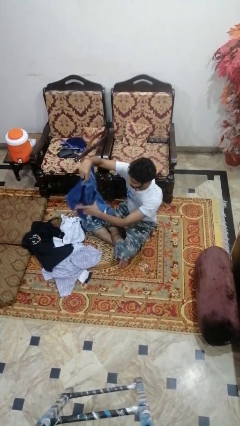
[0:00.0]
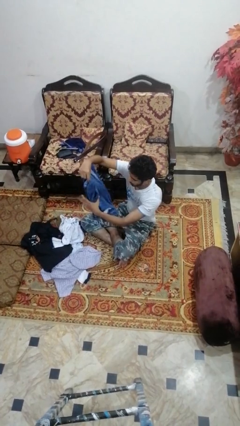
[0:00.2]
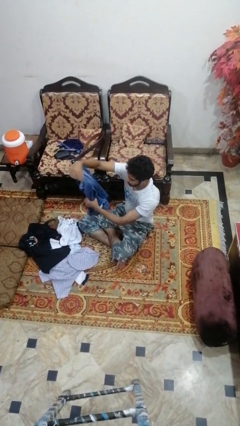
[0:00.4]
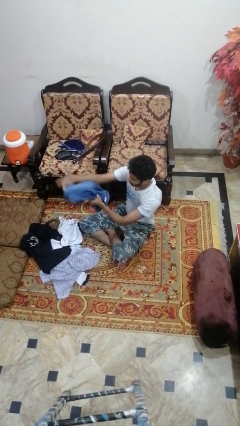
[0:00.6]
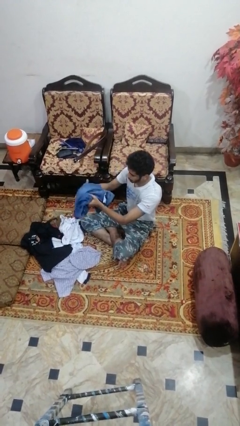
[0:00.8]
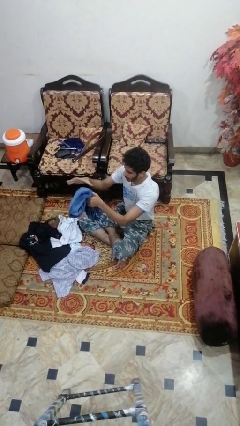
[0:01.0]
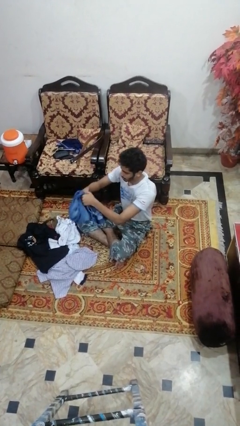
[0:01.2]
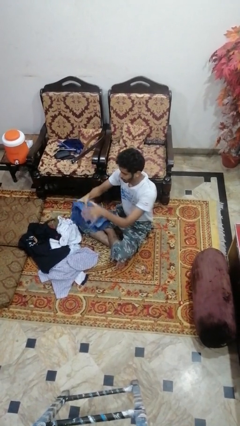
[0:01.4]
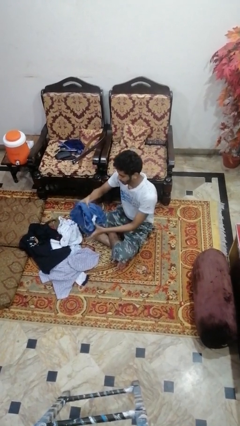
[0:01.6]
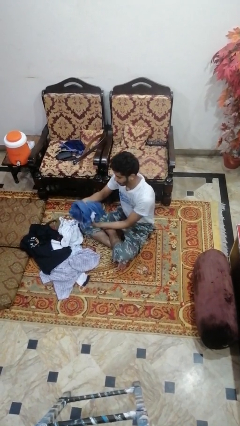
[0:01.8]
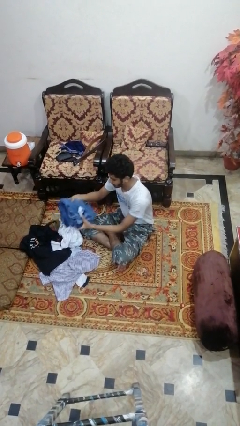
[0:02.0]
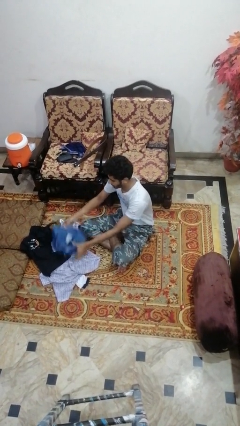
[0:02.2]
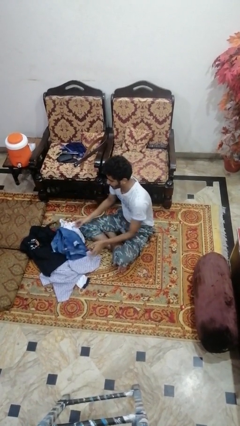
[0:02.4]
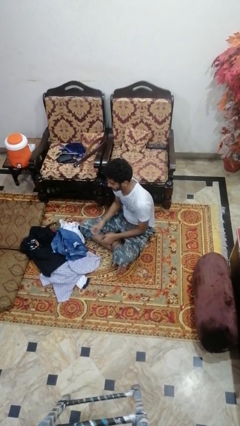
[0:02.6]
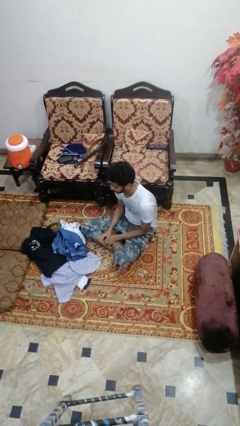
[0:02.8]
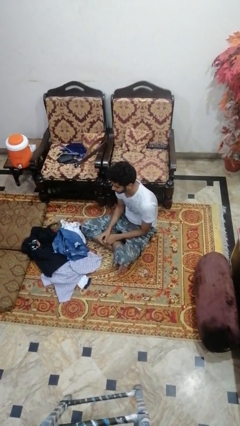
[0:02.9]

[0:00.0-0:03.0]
person folds pants

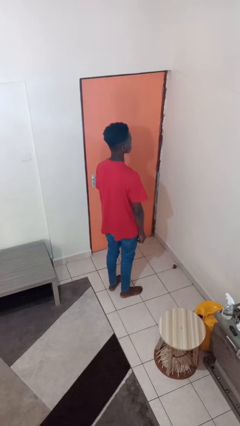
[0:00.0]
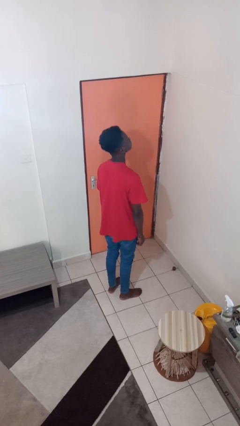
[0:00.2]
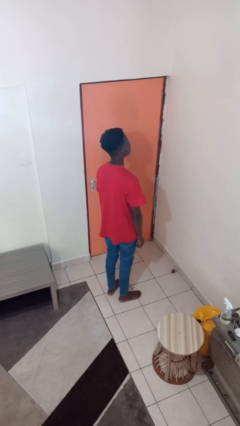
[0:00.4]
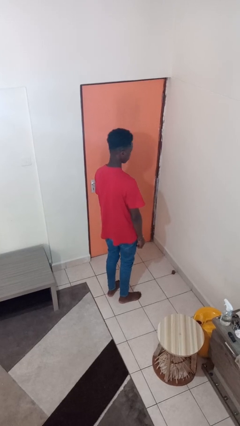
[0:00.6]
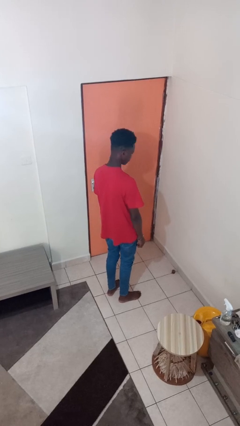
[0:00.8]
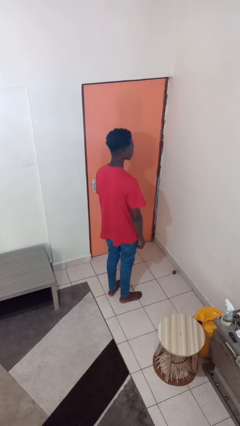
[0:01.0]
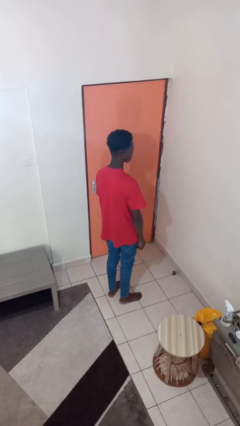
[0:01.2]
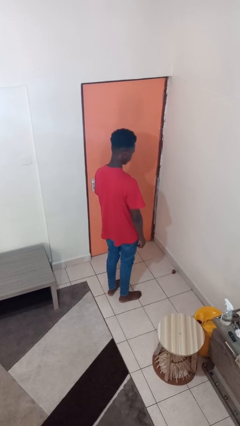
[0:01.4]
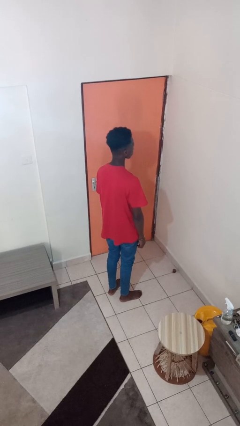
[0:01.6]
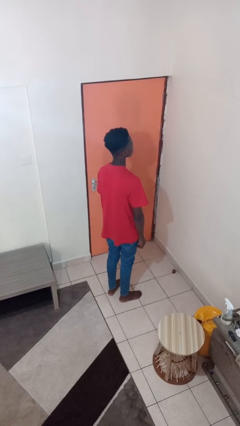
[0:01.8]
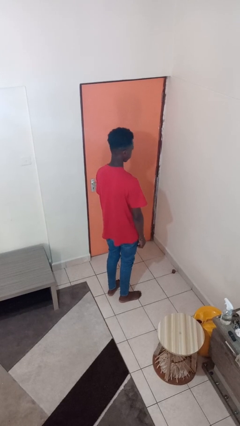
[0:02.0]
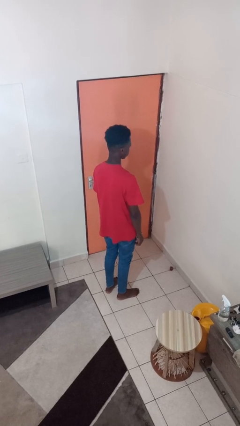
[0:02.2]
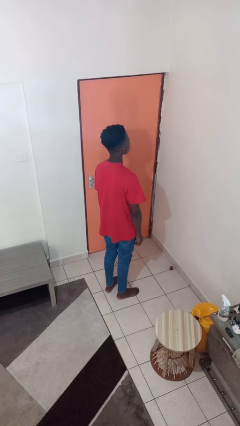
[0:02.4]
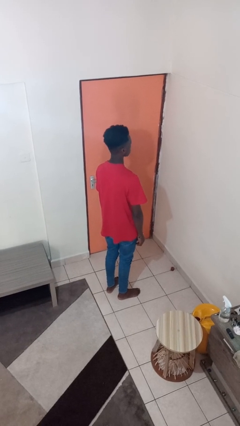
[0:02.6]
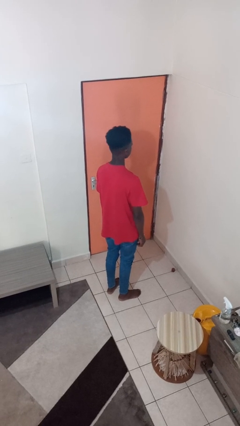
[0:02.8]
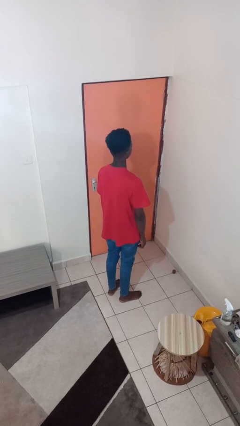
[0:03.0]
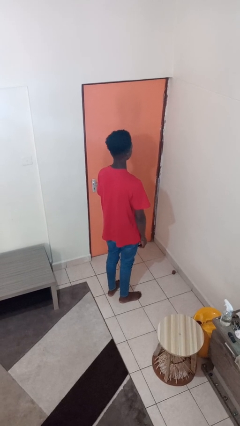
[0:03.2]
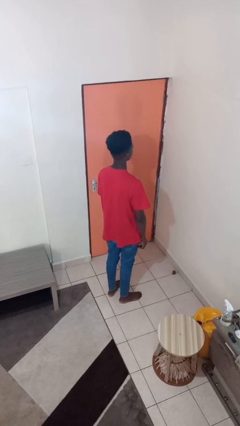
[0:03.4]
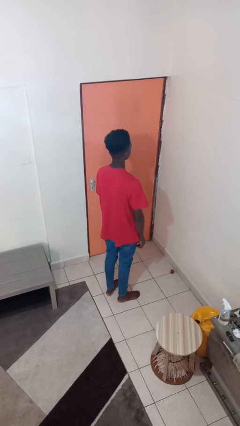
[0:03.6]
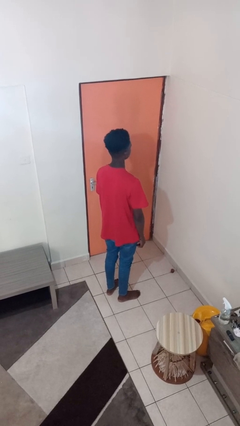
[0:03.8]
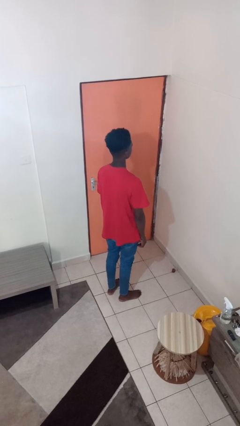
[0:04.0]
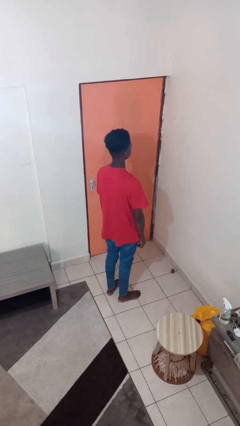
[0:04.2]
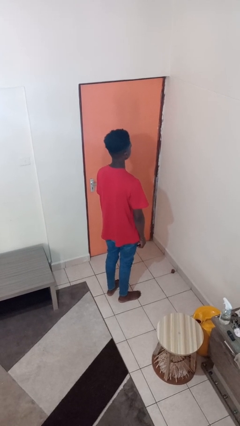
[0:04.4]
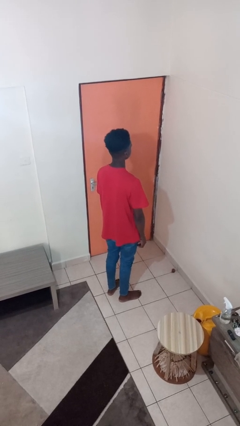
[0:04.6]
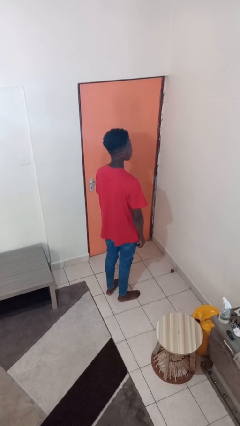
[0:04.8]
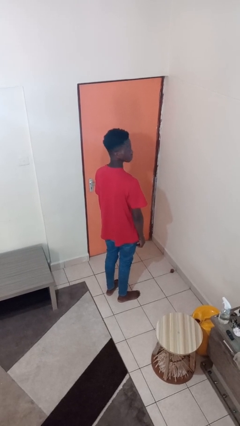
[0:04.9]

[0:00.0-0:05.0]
person nods head

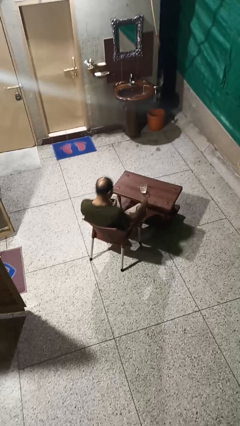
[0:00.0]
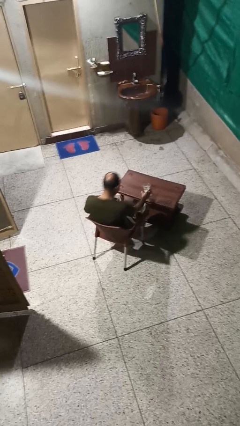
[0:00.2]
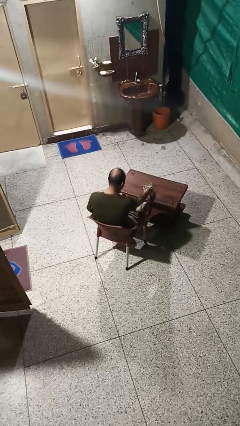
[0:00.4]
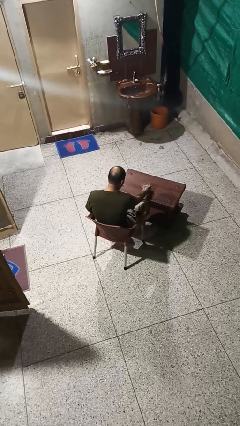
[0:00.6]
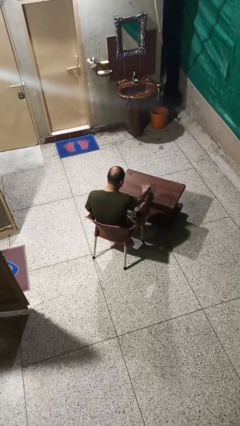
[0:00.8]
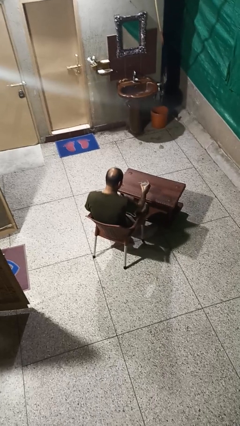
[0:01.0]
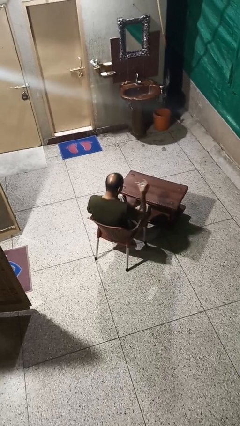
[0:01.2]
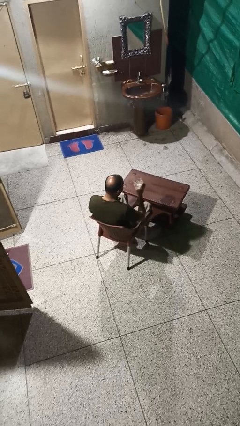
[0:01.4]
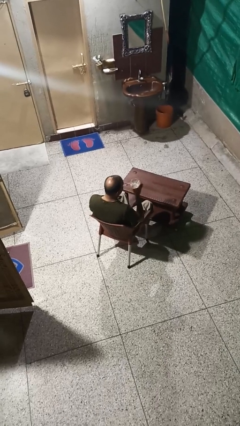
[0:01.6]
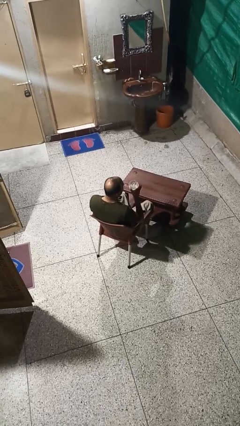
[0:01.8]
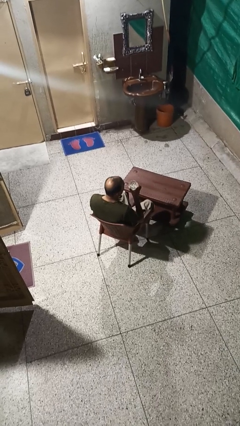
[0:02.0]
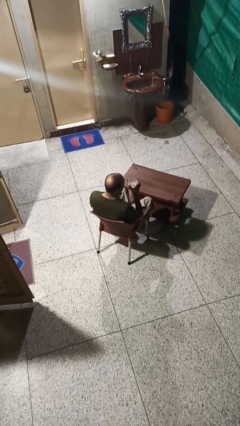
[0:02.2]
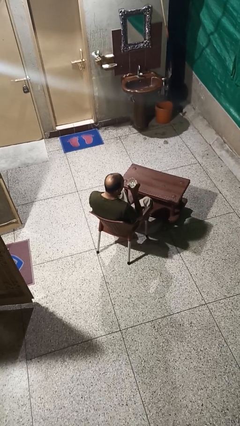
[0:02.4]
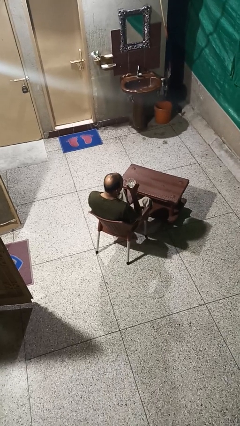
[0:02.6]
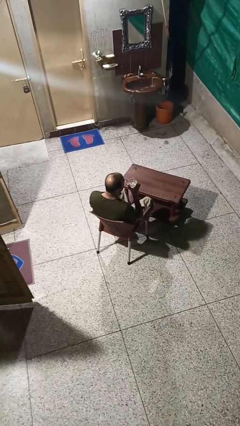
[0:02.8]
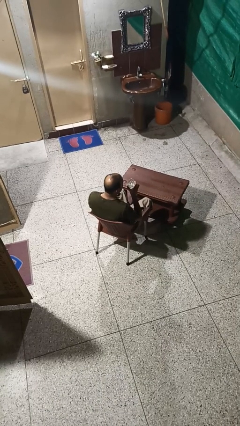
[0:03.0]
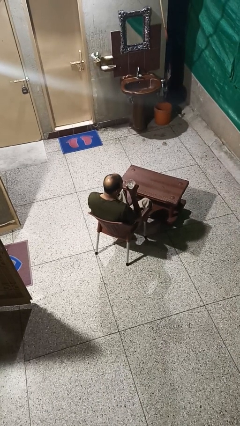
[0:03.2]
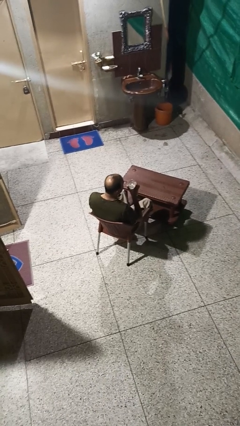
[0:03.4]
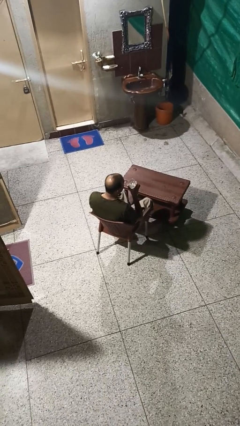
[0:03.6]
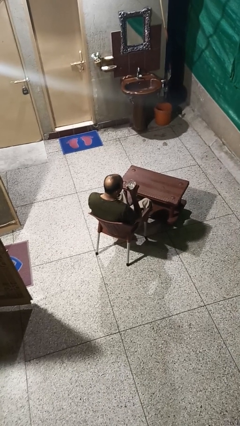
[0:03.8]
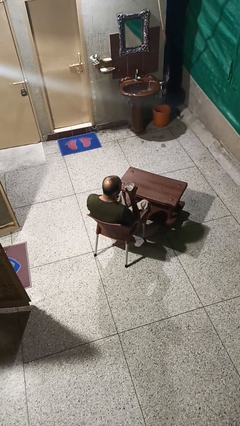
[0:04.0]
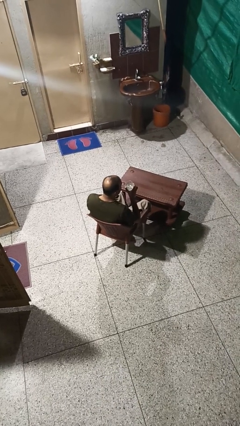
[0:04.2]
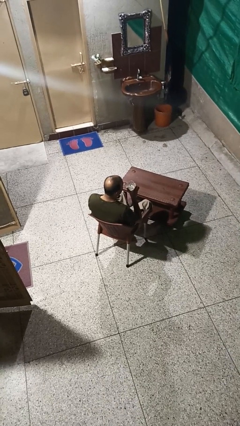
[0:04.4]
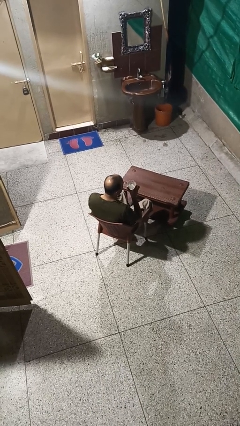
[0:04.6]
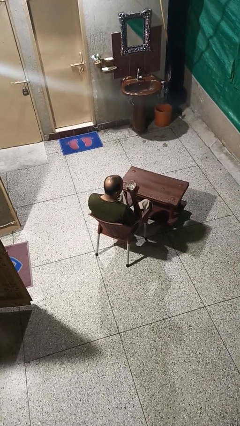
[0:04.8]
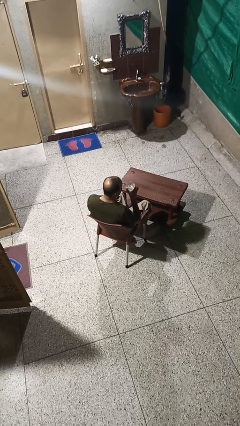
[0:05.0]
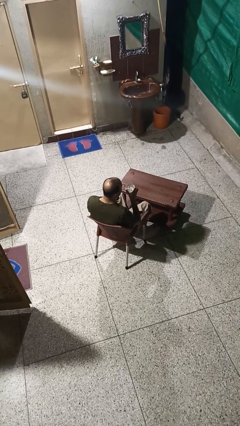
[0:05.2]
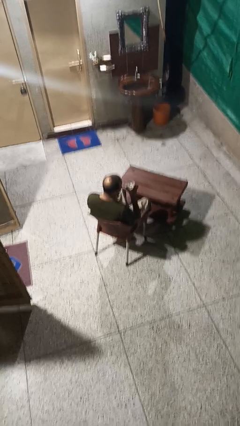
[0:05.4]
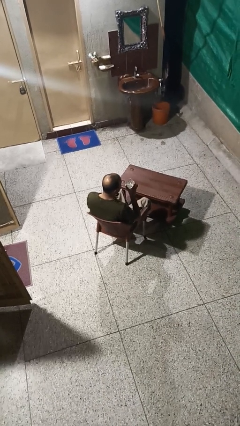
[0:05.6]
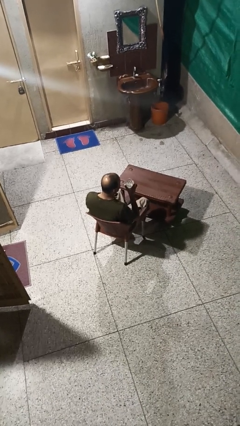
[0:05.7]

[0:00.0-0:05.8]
person drinks from straw

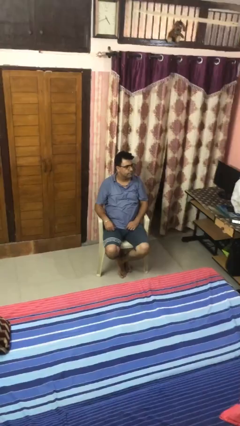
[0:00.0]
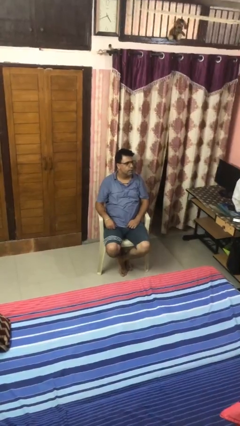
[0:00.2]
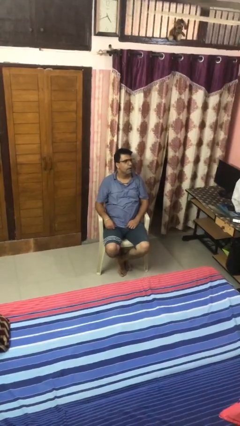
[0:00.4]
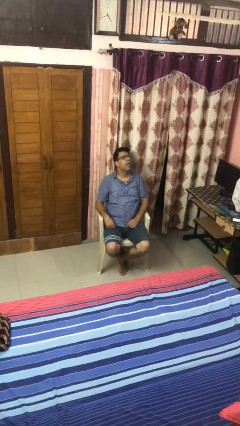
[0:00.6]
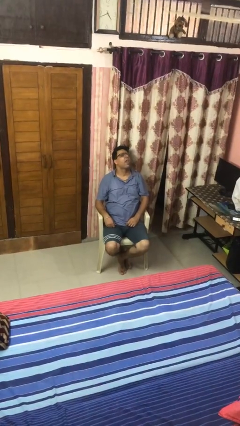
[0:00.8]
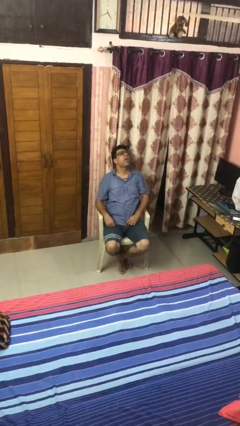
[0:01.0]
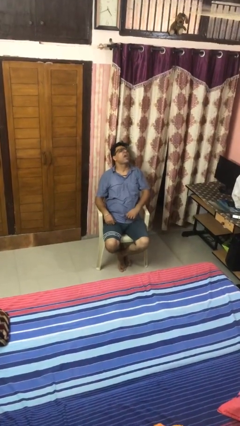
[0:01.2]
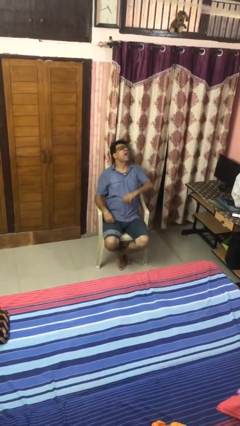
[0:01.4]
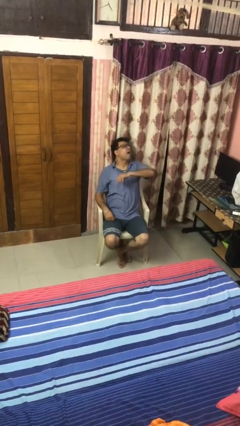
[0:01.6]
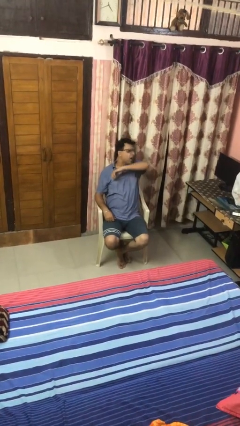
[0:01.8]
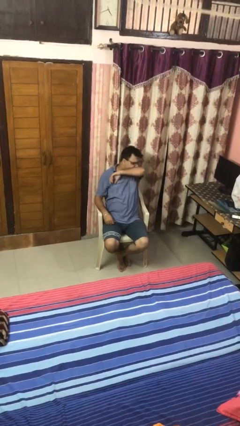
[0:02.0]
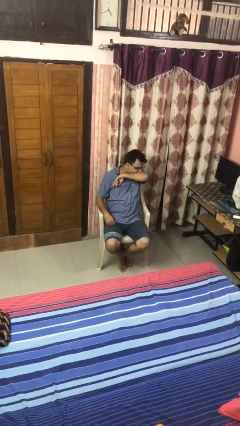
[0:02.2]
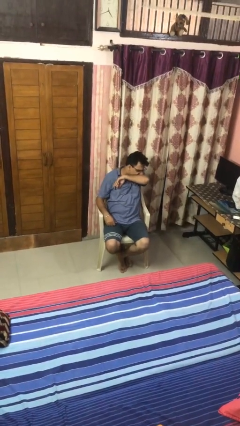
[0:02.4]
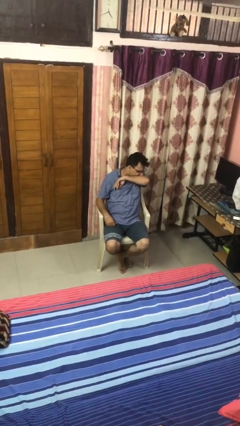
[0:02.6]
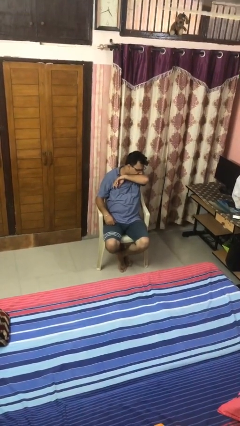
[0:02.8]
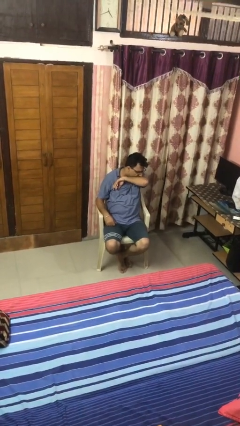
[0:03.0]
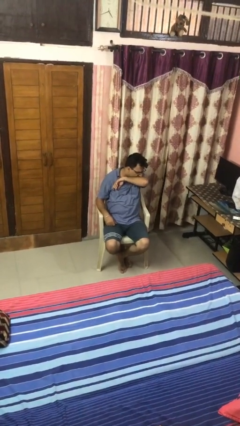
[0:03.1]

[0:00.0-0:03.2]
person sneezes into arm

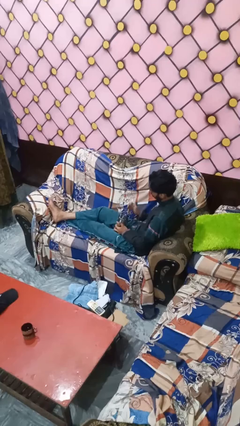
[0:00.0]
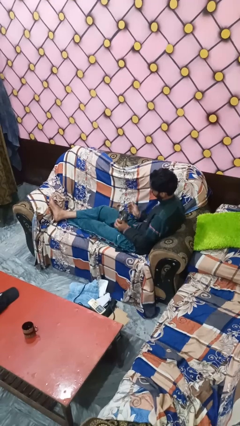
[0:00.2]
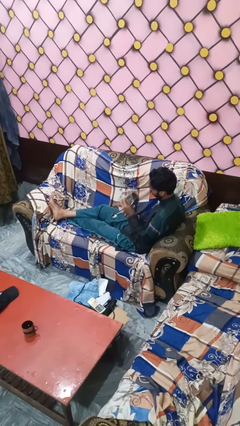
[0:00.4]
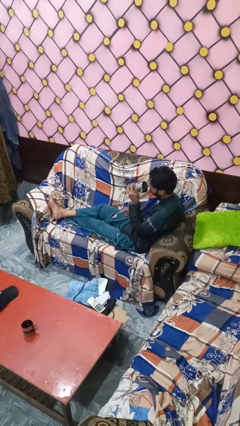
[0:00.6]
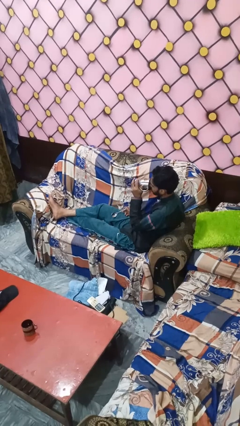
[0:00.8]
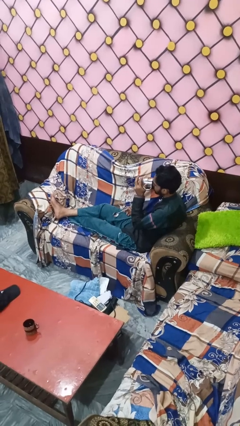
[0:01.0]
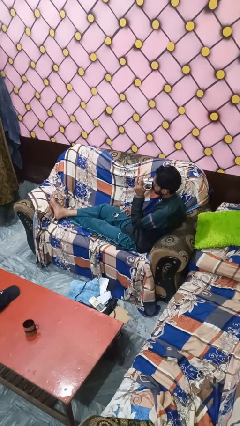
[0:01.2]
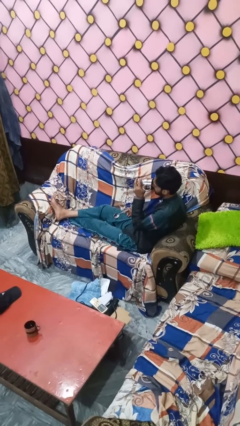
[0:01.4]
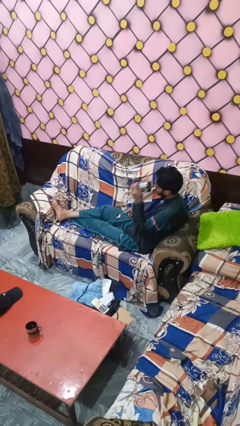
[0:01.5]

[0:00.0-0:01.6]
person drinks from mug
